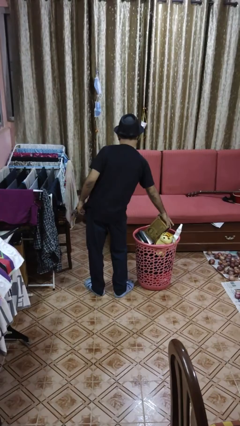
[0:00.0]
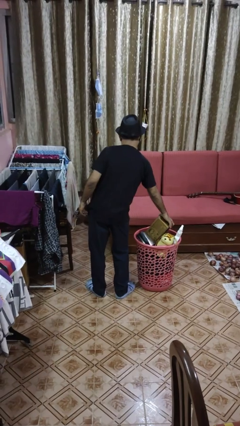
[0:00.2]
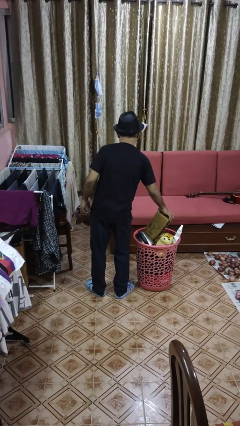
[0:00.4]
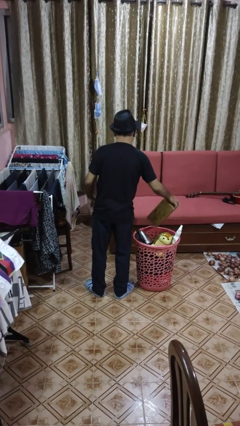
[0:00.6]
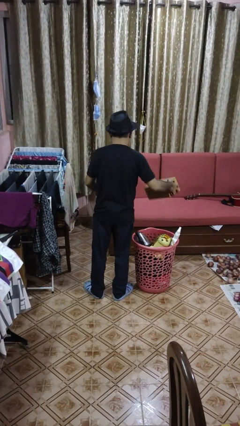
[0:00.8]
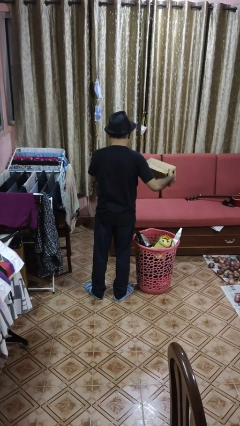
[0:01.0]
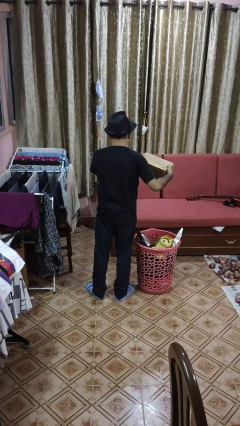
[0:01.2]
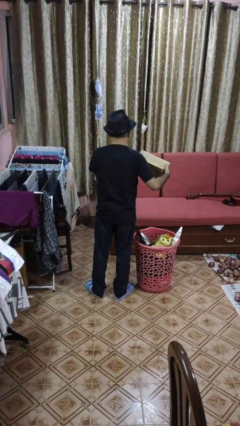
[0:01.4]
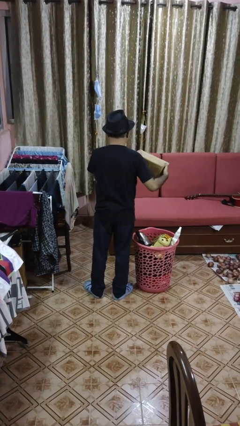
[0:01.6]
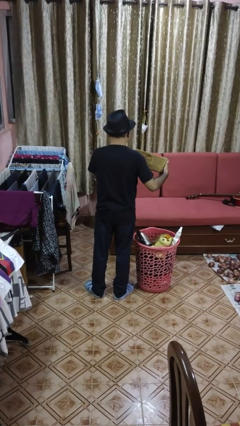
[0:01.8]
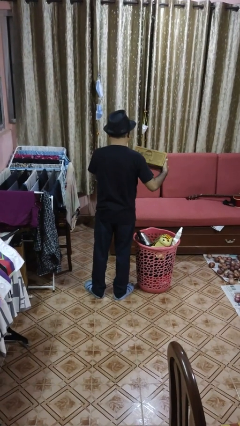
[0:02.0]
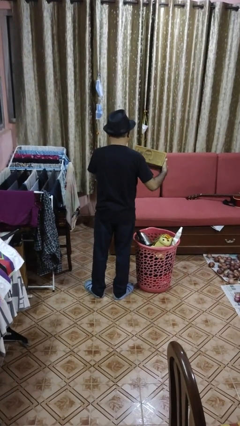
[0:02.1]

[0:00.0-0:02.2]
person takes object from basket

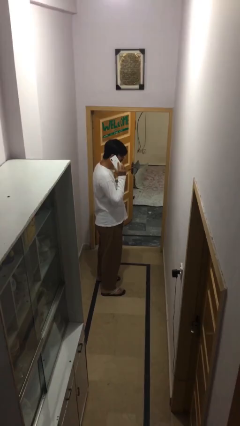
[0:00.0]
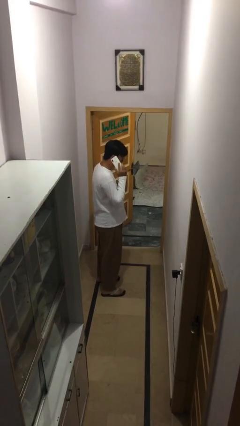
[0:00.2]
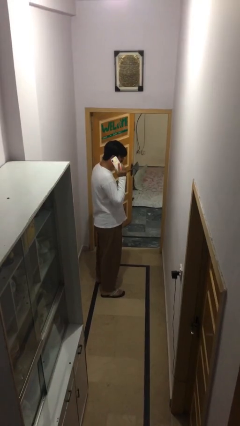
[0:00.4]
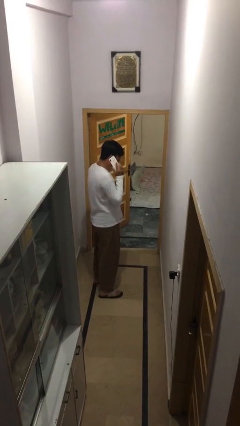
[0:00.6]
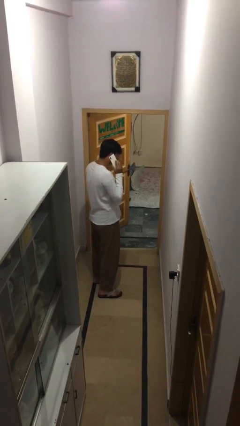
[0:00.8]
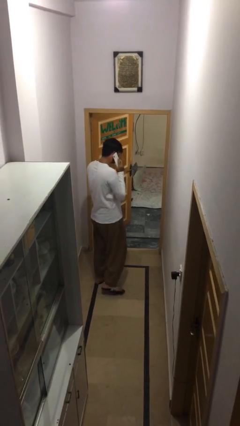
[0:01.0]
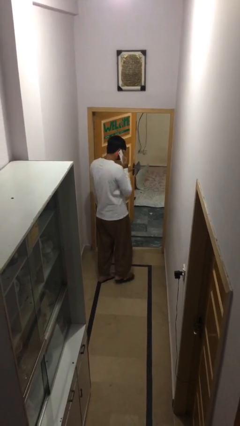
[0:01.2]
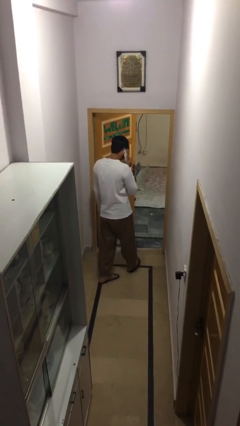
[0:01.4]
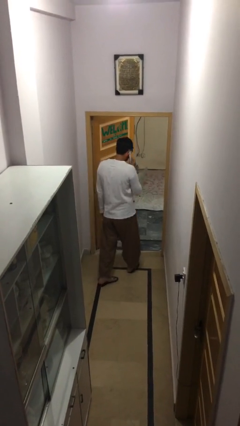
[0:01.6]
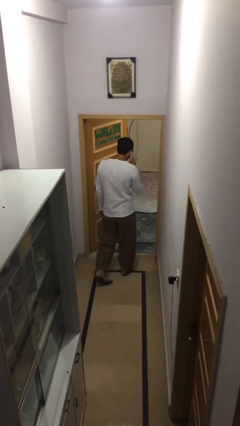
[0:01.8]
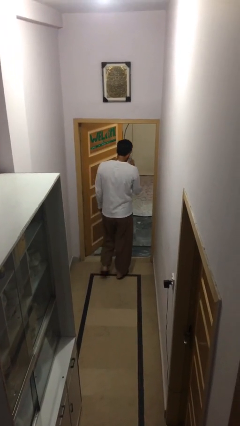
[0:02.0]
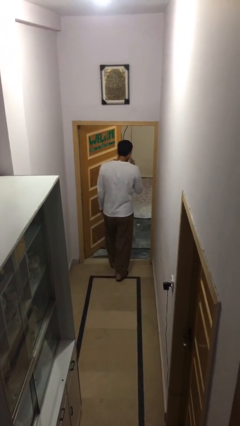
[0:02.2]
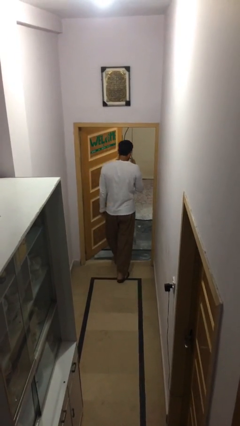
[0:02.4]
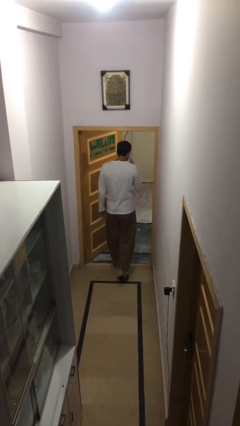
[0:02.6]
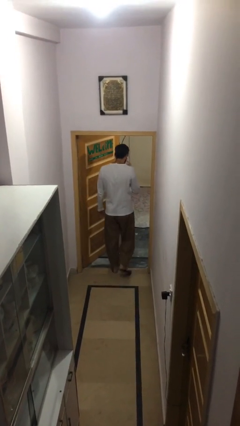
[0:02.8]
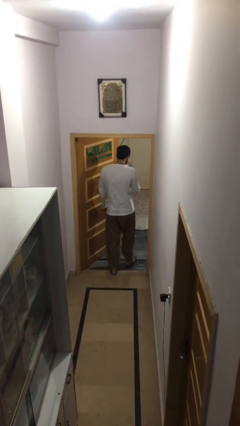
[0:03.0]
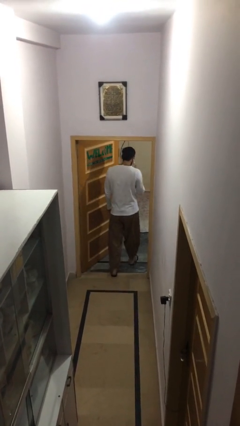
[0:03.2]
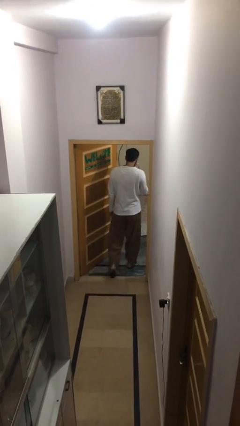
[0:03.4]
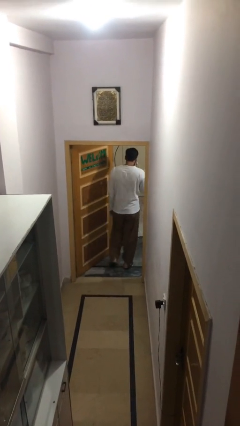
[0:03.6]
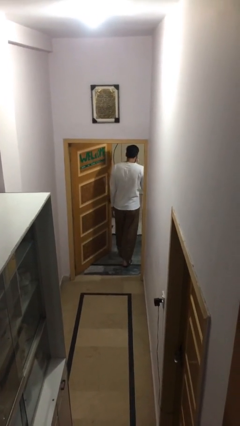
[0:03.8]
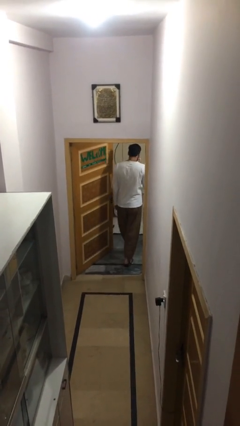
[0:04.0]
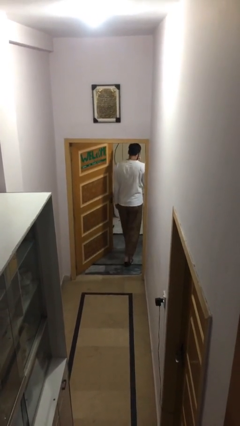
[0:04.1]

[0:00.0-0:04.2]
person exits scene through structure

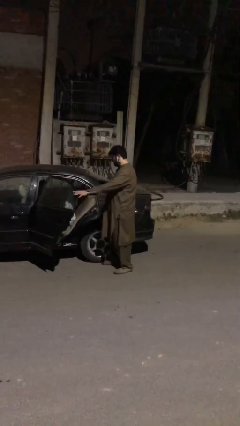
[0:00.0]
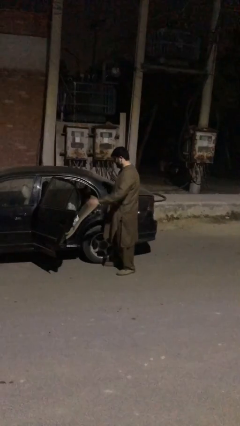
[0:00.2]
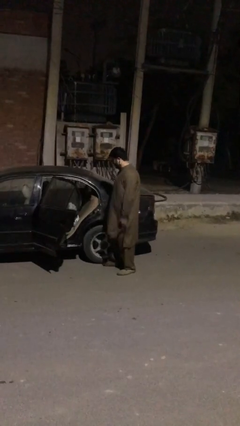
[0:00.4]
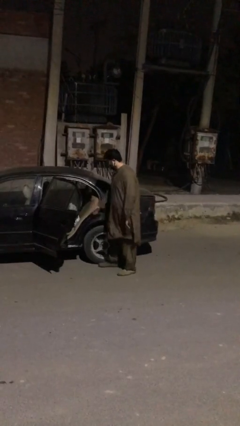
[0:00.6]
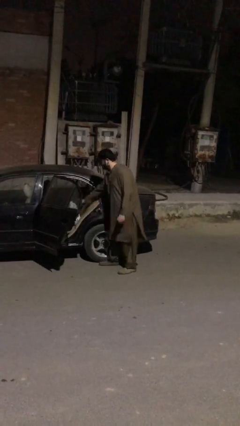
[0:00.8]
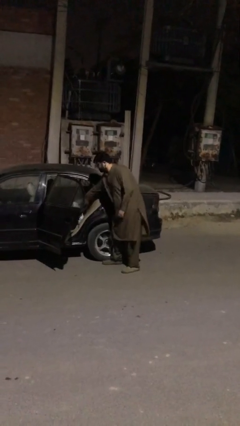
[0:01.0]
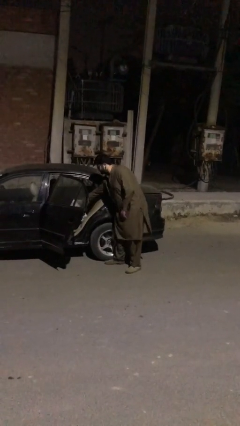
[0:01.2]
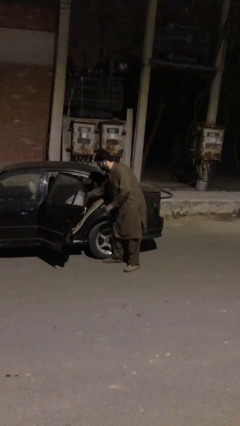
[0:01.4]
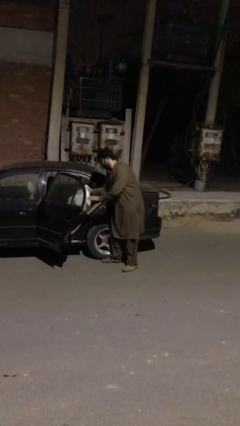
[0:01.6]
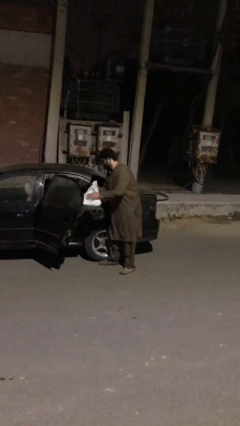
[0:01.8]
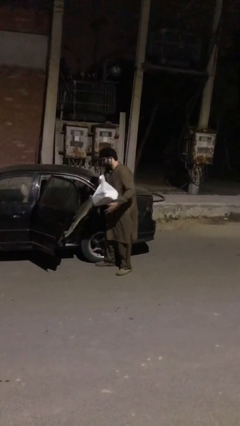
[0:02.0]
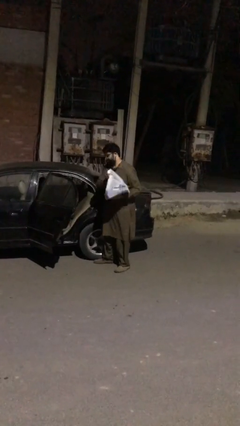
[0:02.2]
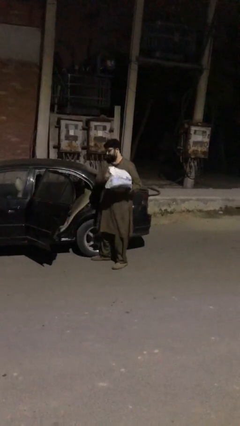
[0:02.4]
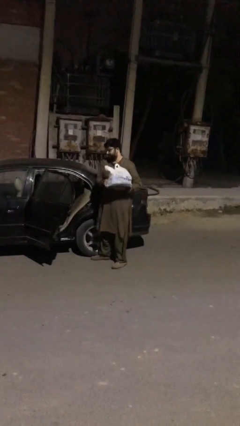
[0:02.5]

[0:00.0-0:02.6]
person unloads car

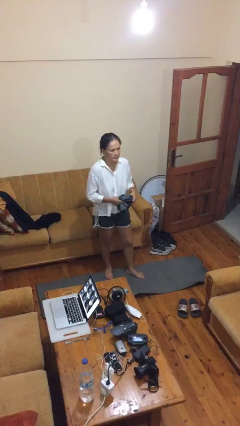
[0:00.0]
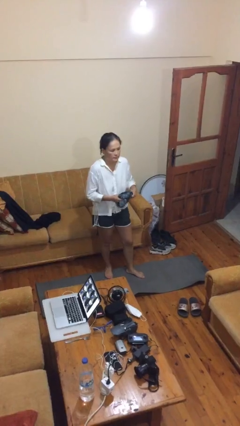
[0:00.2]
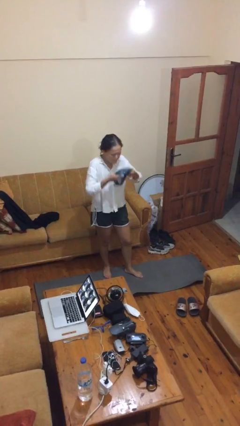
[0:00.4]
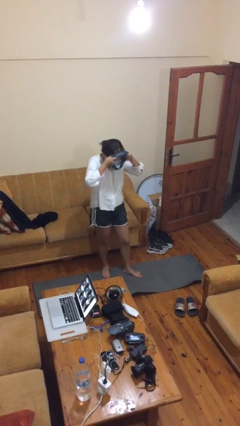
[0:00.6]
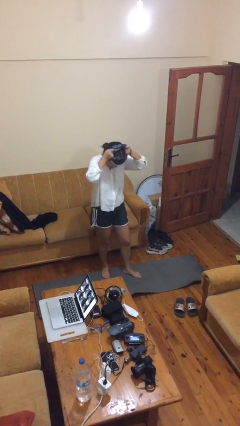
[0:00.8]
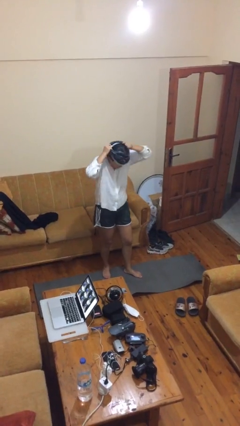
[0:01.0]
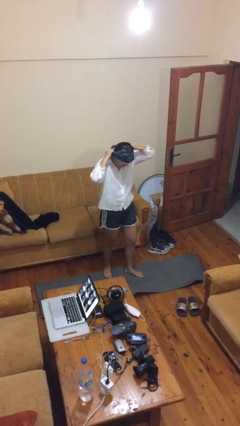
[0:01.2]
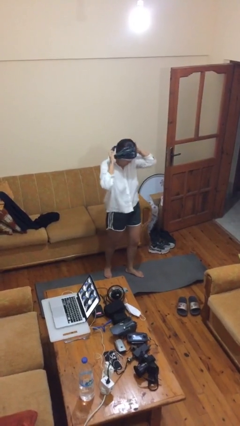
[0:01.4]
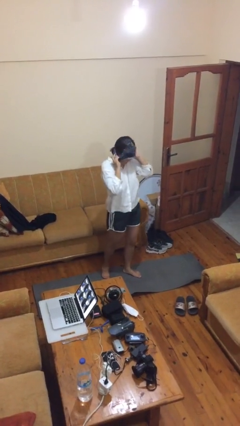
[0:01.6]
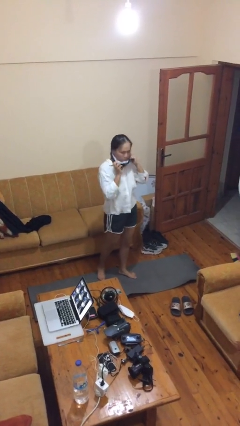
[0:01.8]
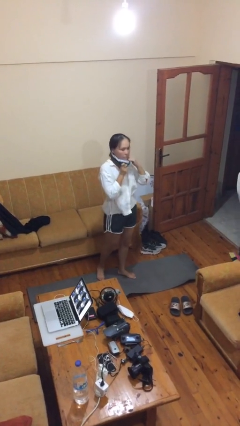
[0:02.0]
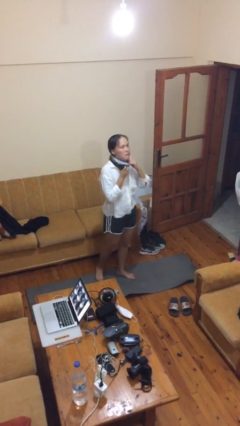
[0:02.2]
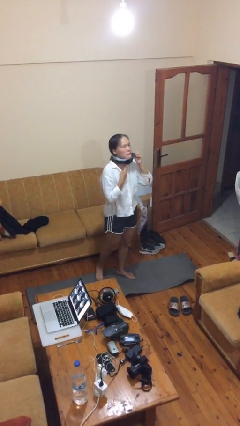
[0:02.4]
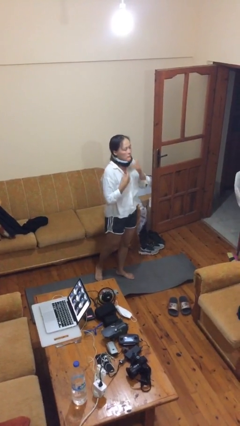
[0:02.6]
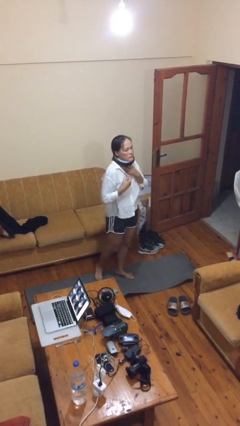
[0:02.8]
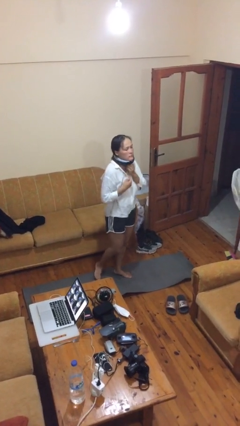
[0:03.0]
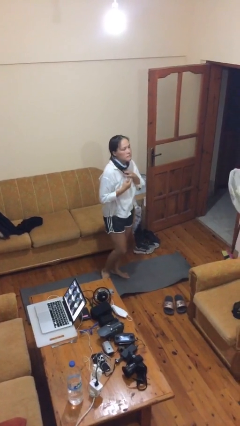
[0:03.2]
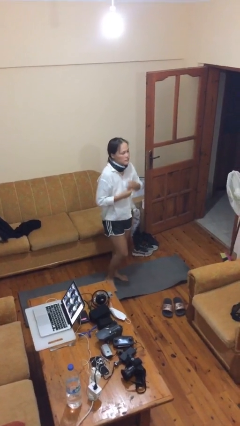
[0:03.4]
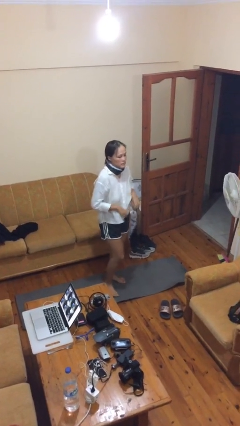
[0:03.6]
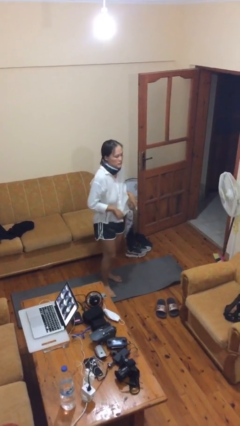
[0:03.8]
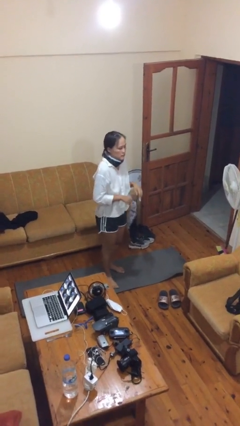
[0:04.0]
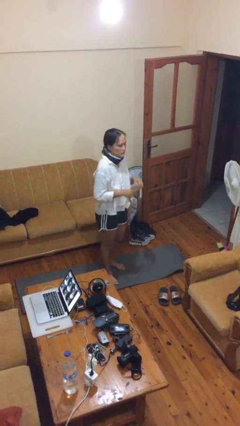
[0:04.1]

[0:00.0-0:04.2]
person puts on scarf

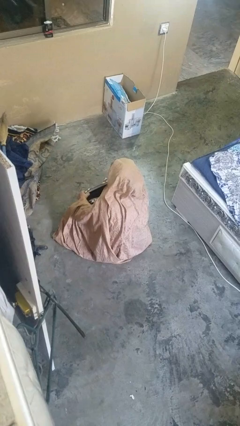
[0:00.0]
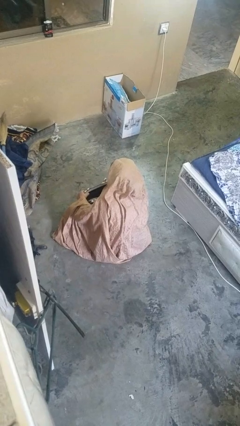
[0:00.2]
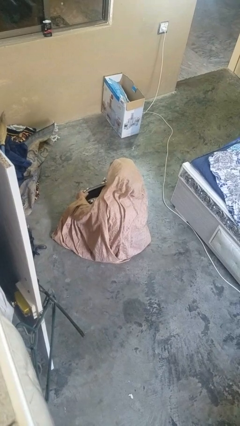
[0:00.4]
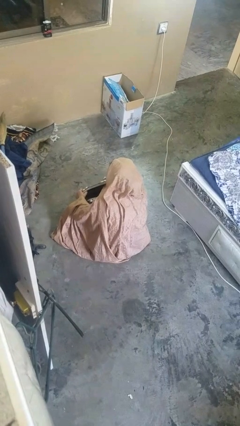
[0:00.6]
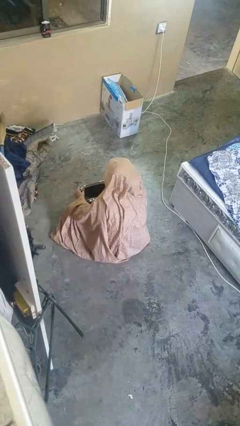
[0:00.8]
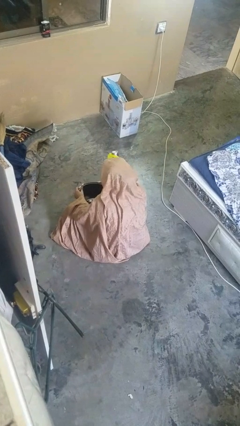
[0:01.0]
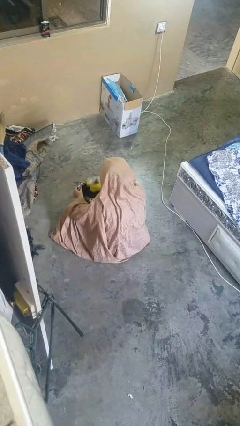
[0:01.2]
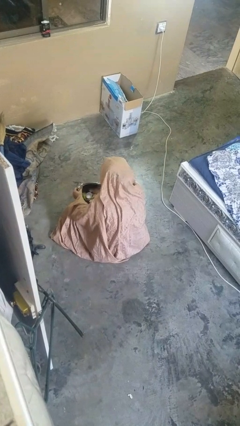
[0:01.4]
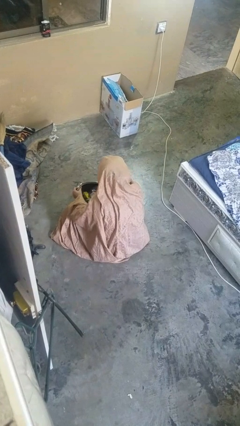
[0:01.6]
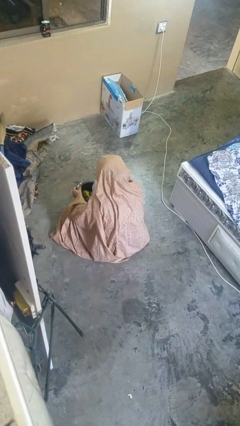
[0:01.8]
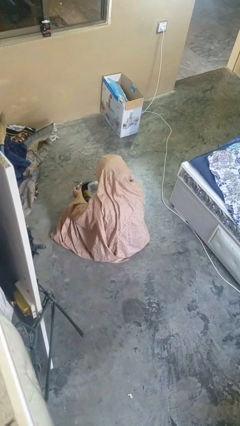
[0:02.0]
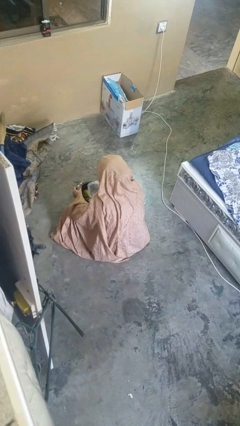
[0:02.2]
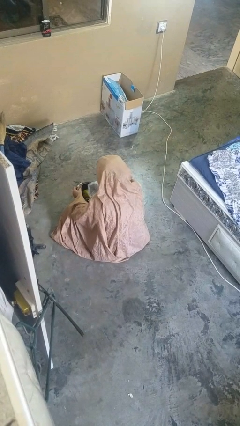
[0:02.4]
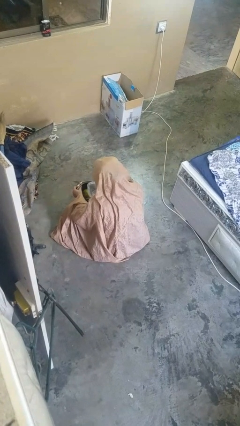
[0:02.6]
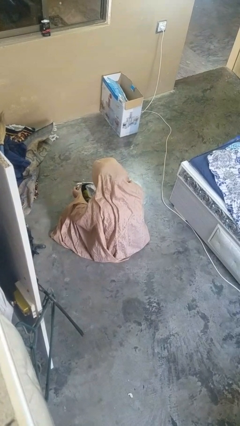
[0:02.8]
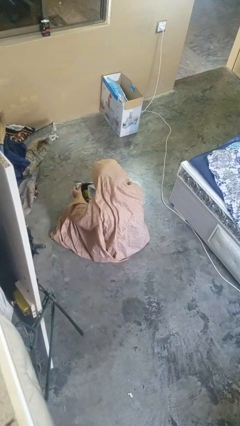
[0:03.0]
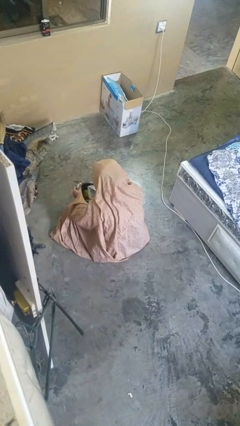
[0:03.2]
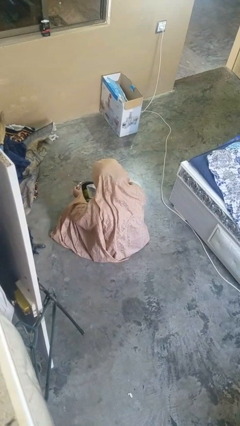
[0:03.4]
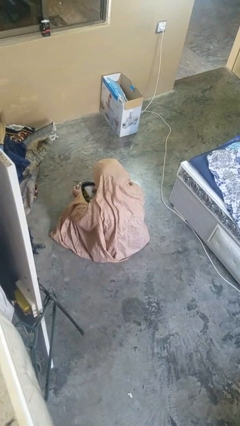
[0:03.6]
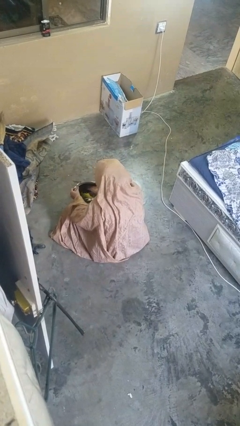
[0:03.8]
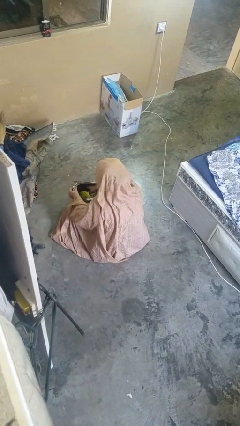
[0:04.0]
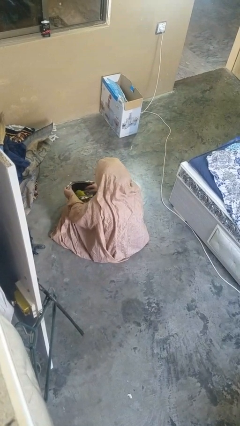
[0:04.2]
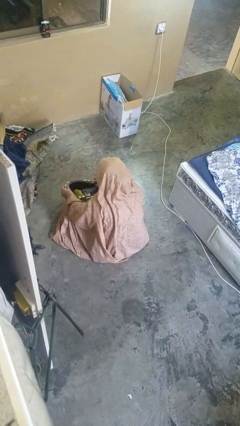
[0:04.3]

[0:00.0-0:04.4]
person puts object into purse
